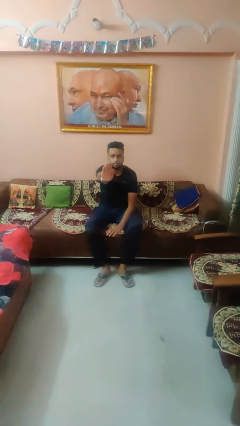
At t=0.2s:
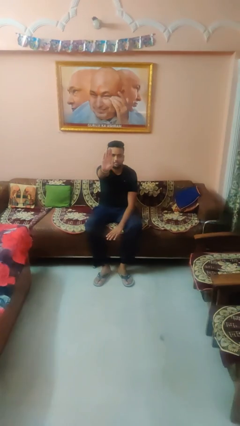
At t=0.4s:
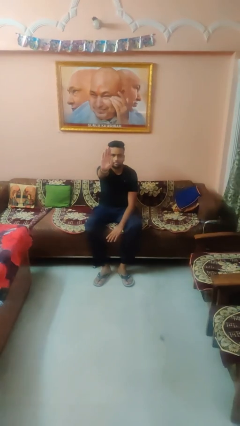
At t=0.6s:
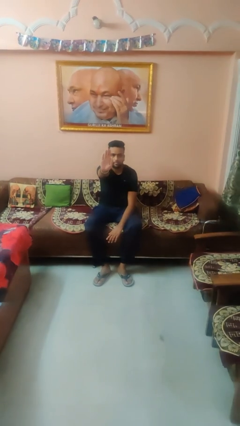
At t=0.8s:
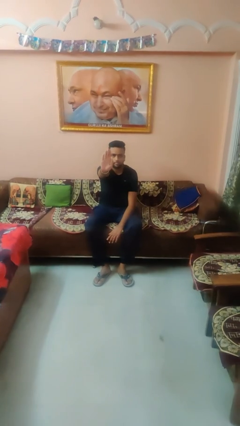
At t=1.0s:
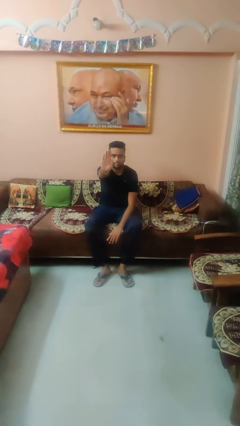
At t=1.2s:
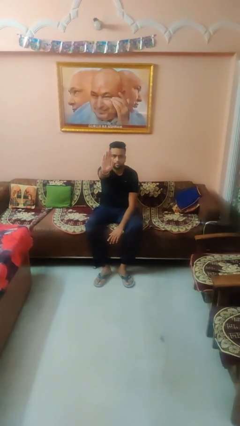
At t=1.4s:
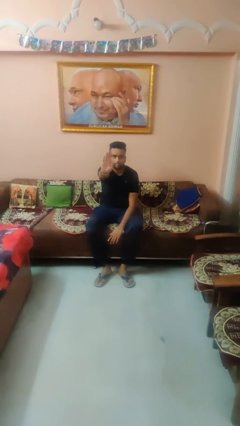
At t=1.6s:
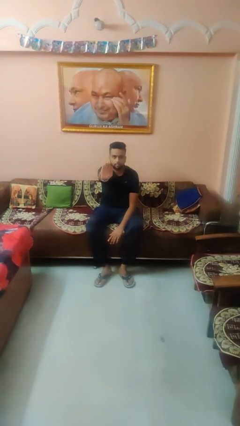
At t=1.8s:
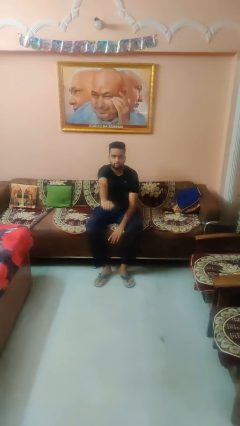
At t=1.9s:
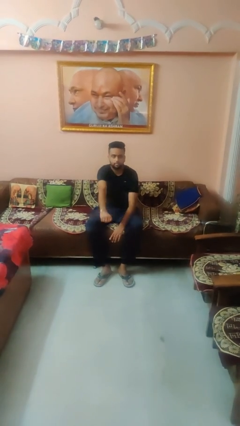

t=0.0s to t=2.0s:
person gestures stop

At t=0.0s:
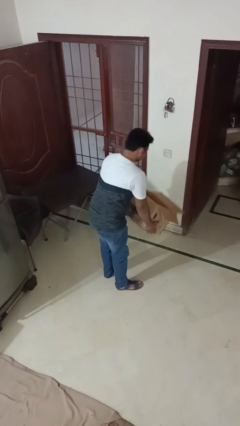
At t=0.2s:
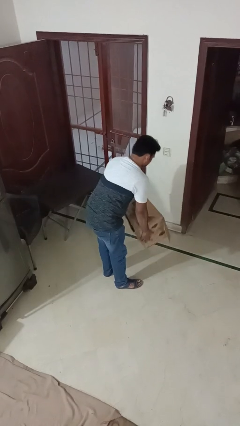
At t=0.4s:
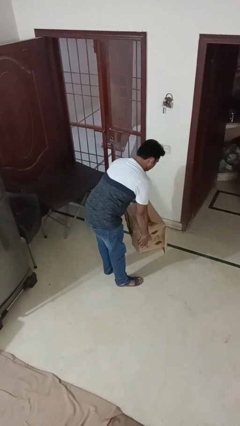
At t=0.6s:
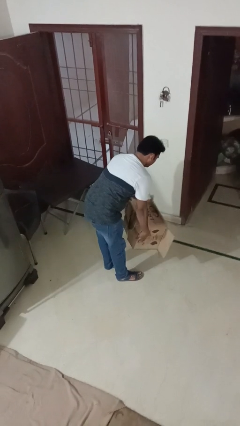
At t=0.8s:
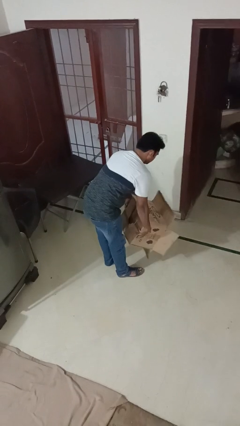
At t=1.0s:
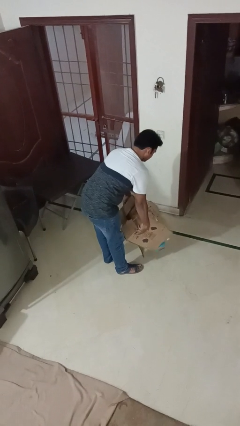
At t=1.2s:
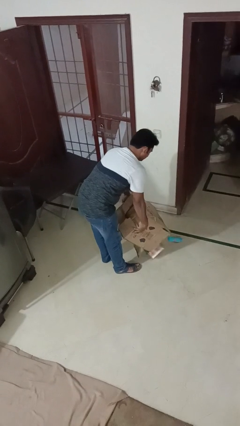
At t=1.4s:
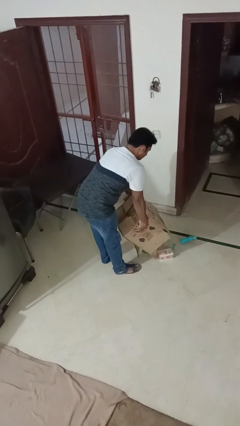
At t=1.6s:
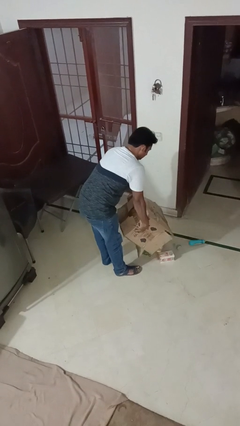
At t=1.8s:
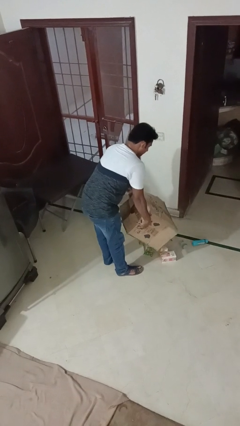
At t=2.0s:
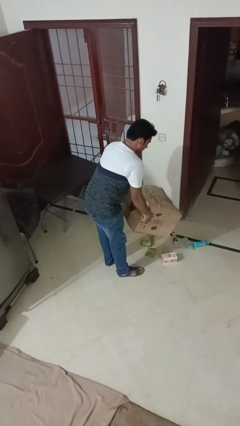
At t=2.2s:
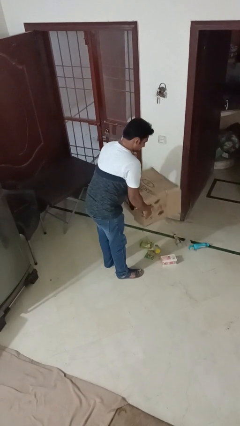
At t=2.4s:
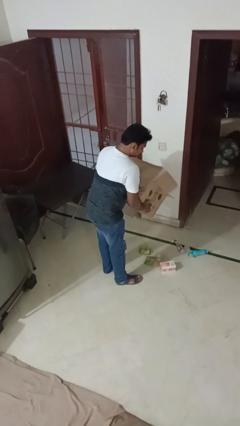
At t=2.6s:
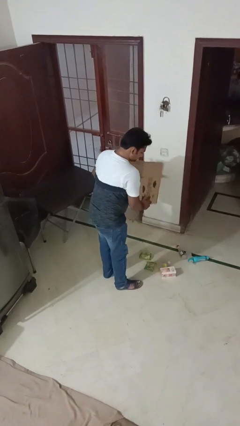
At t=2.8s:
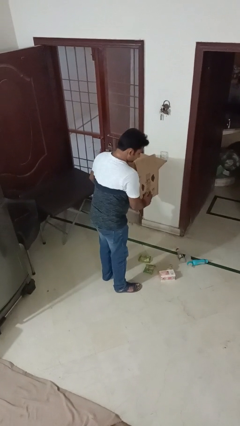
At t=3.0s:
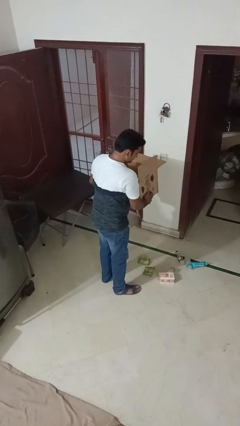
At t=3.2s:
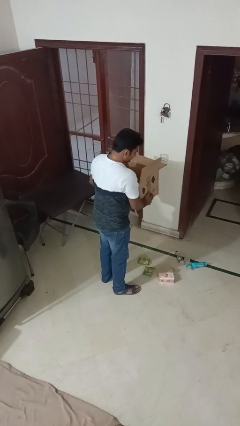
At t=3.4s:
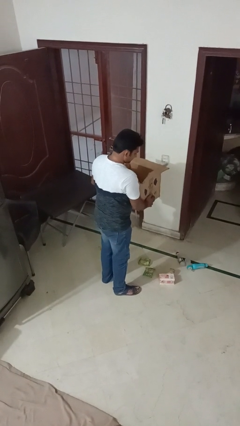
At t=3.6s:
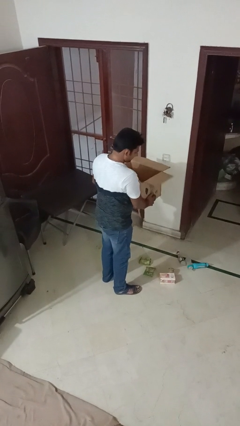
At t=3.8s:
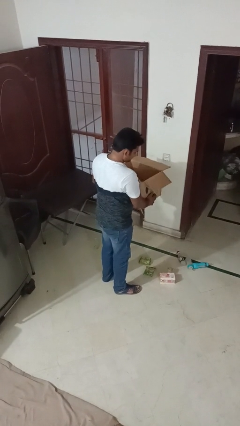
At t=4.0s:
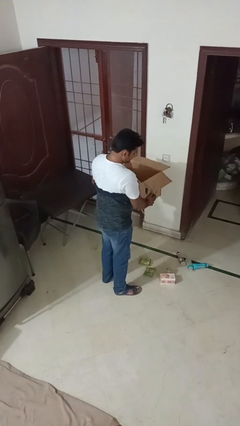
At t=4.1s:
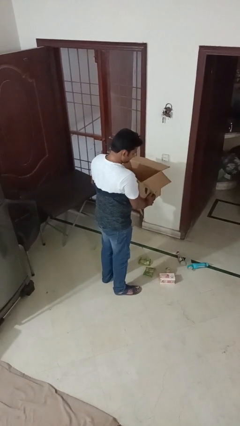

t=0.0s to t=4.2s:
person unloads box onto floor

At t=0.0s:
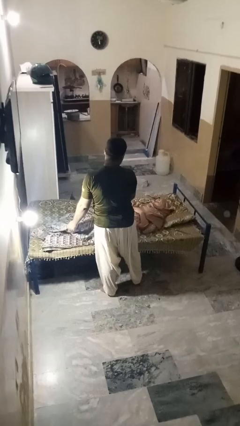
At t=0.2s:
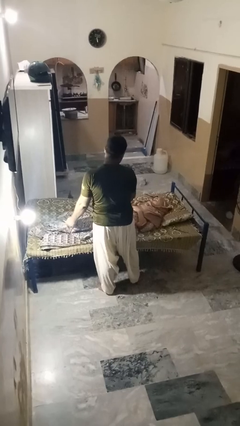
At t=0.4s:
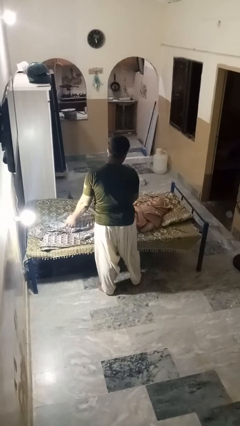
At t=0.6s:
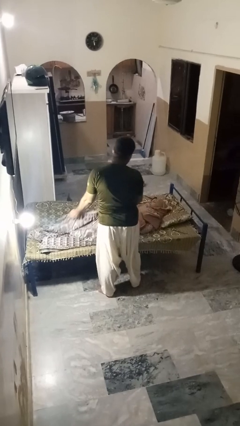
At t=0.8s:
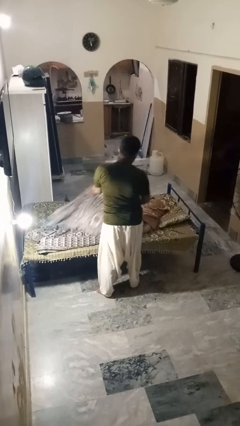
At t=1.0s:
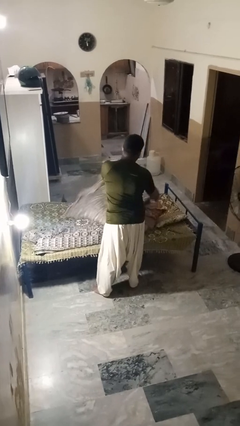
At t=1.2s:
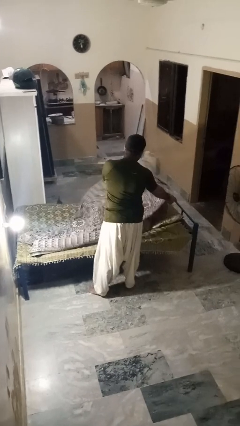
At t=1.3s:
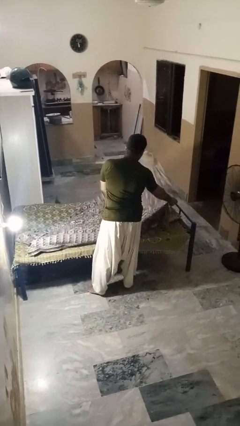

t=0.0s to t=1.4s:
person covers friend with blanket

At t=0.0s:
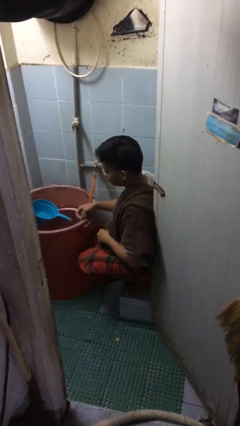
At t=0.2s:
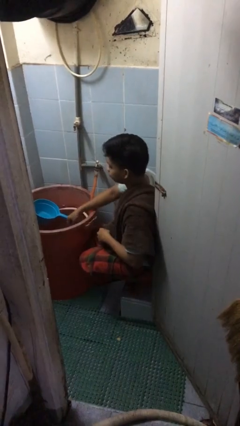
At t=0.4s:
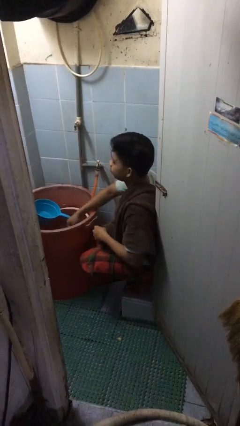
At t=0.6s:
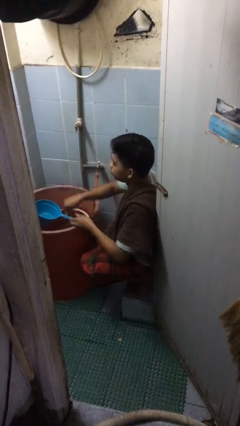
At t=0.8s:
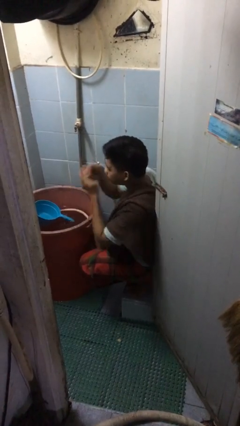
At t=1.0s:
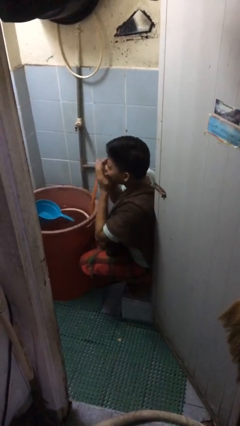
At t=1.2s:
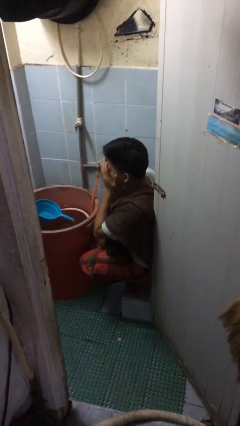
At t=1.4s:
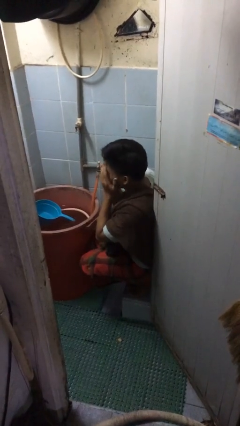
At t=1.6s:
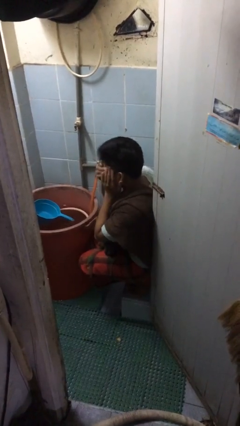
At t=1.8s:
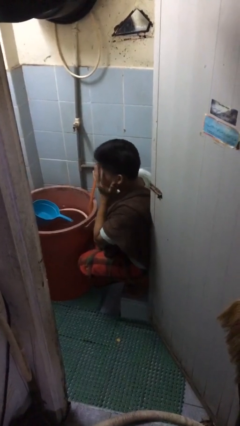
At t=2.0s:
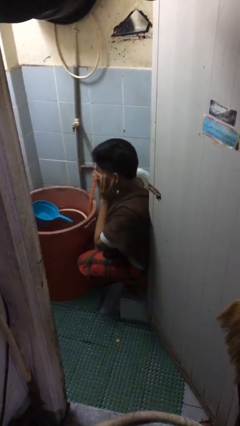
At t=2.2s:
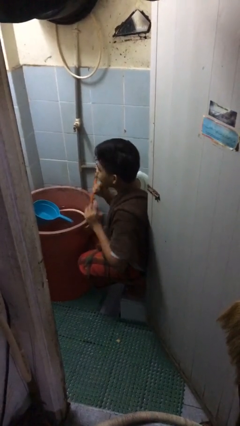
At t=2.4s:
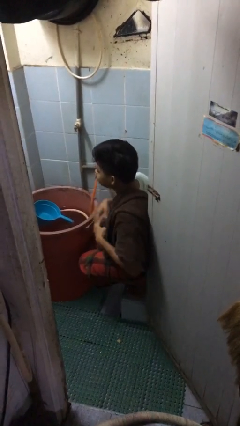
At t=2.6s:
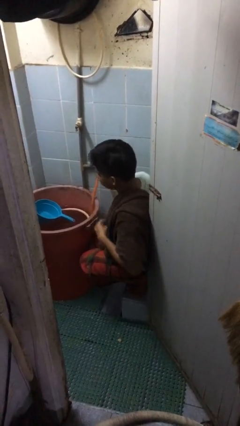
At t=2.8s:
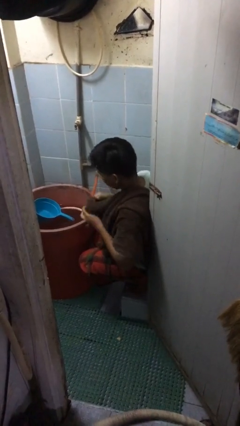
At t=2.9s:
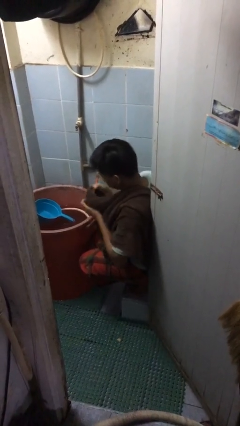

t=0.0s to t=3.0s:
person washes face

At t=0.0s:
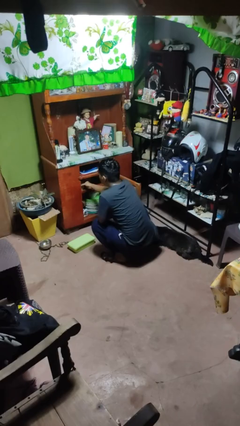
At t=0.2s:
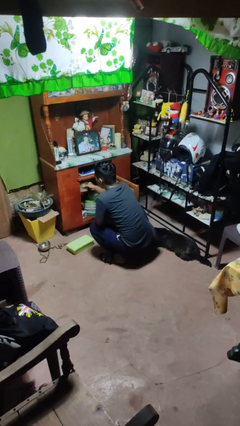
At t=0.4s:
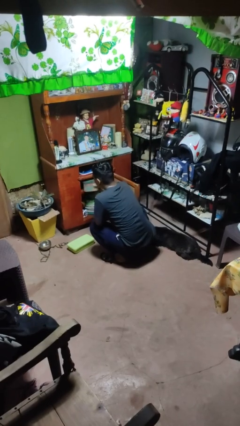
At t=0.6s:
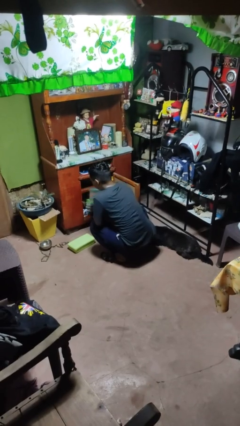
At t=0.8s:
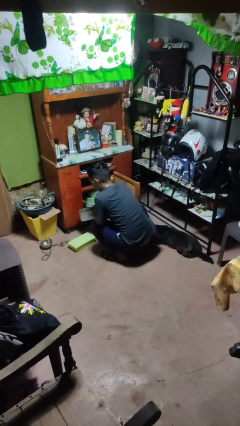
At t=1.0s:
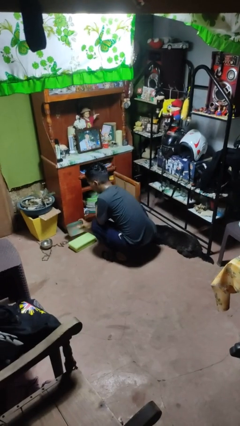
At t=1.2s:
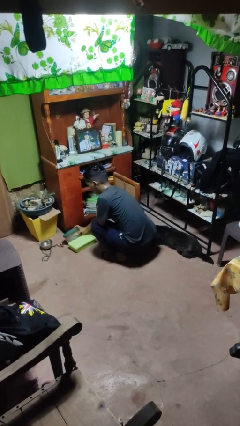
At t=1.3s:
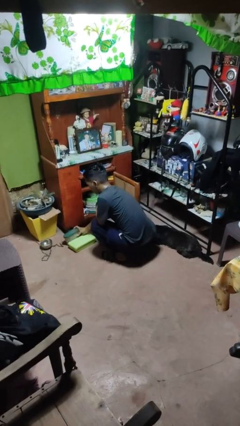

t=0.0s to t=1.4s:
person takes object from cabinet

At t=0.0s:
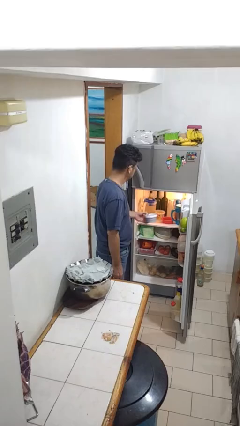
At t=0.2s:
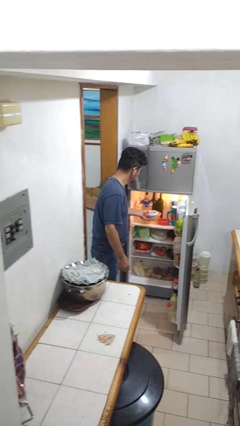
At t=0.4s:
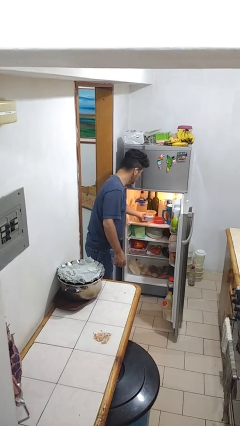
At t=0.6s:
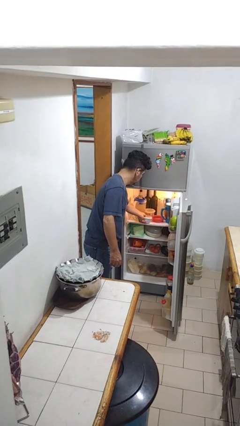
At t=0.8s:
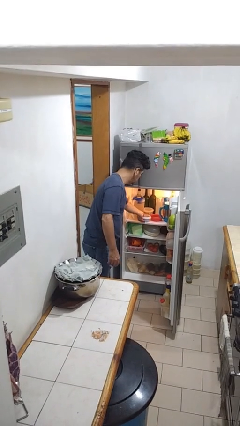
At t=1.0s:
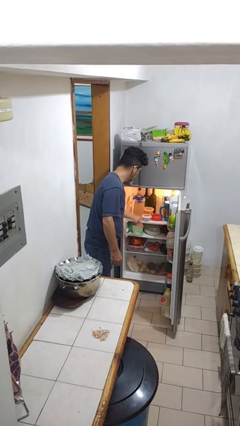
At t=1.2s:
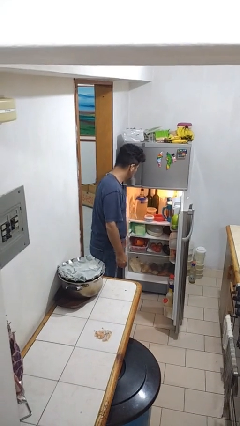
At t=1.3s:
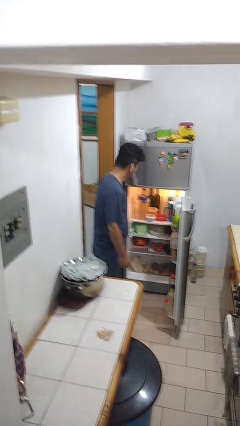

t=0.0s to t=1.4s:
person puts object into refrigerator

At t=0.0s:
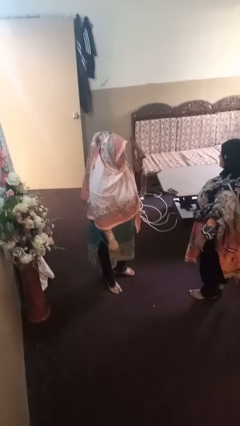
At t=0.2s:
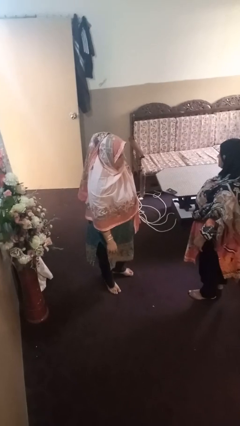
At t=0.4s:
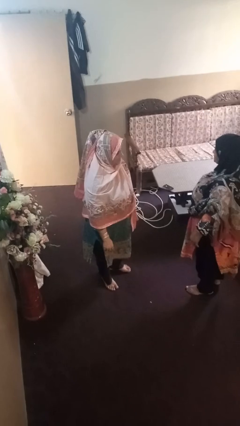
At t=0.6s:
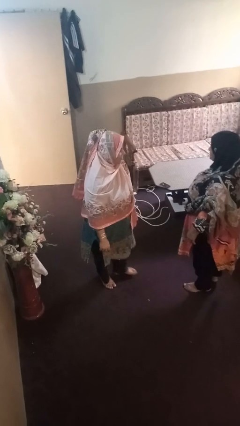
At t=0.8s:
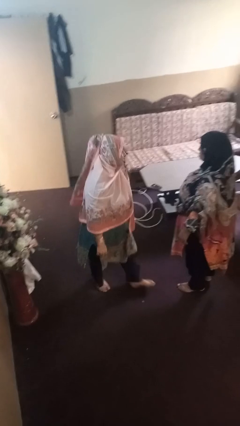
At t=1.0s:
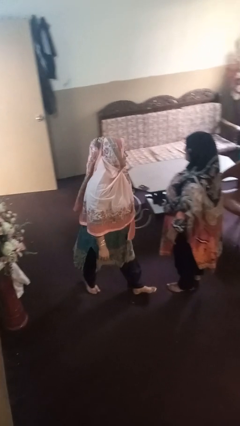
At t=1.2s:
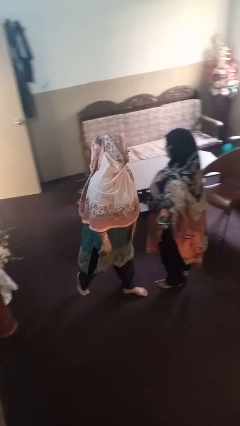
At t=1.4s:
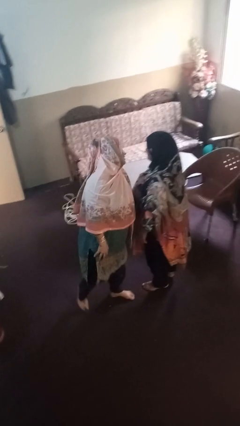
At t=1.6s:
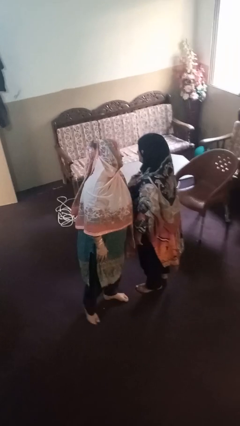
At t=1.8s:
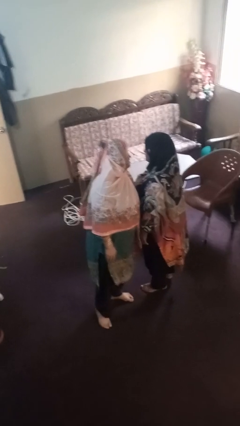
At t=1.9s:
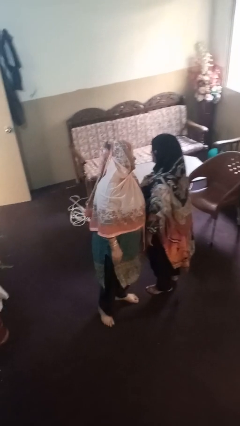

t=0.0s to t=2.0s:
person laughs with person

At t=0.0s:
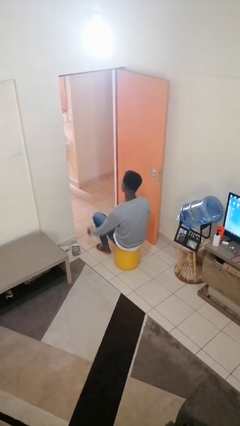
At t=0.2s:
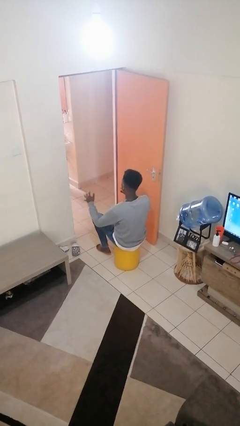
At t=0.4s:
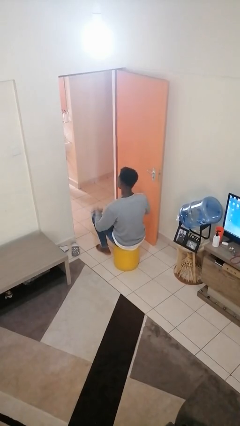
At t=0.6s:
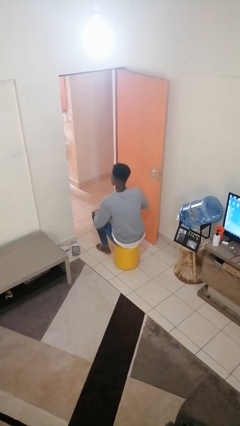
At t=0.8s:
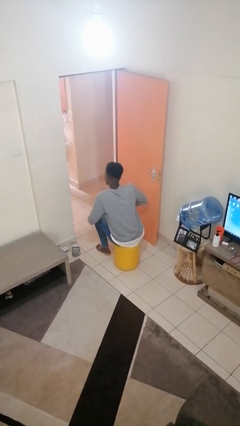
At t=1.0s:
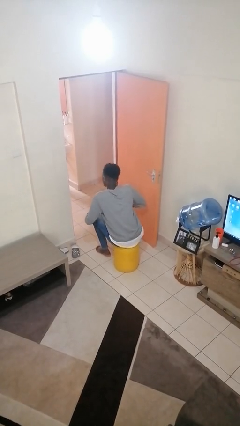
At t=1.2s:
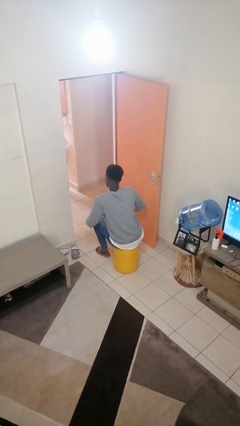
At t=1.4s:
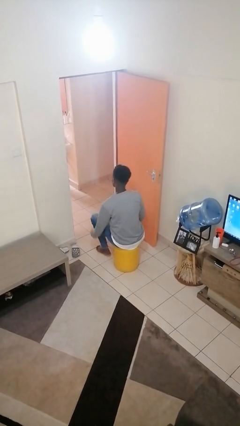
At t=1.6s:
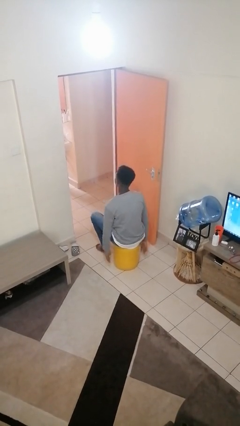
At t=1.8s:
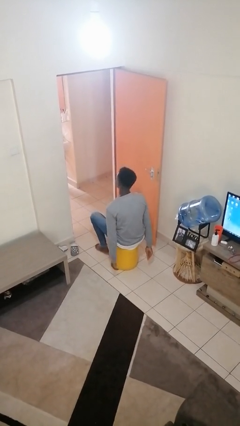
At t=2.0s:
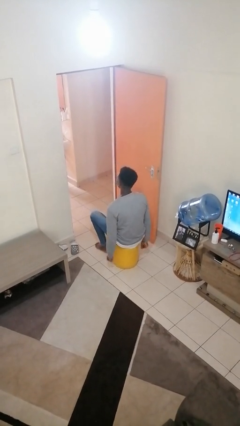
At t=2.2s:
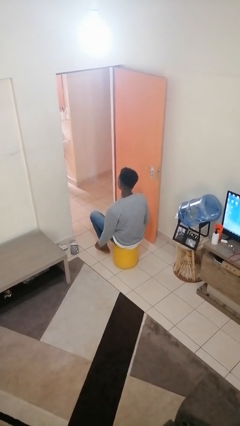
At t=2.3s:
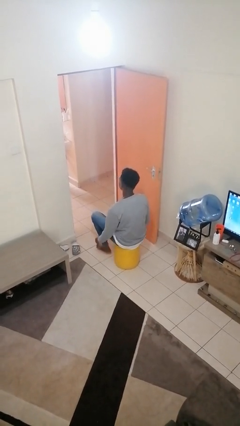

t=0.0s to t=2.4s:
person slaps hands on thighs
